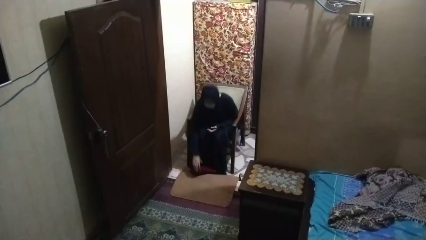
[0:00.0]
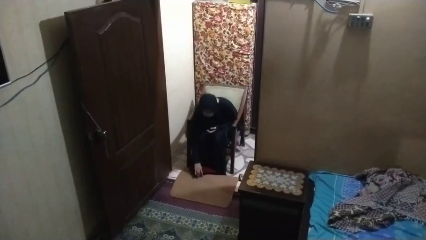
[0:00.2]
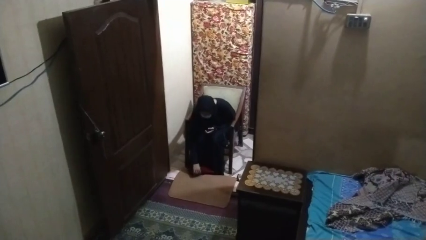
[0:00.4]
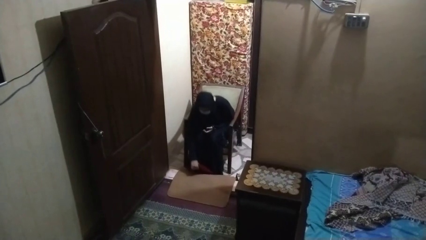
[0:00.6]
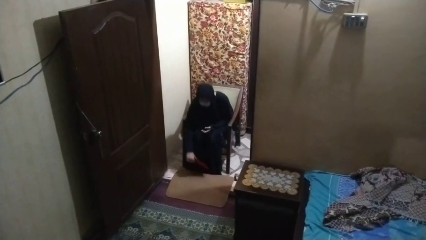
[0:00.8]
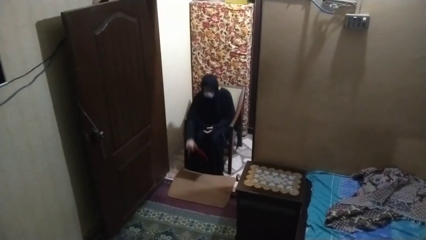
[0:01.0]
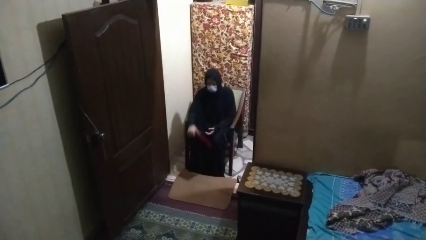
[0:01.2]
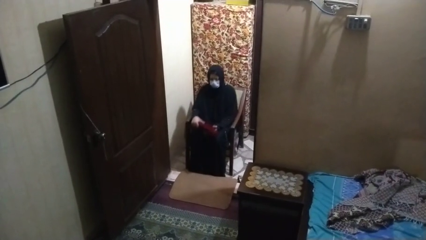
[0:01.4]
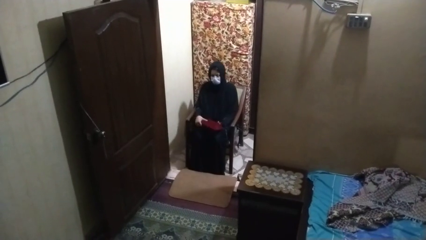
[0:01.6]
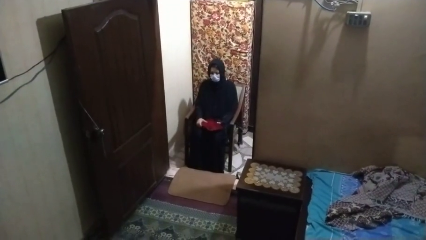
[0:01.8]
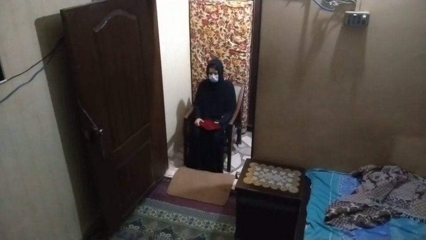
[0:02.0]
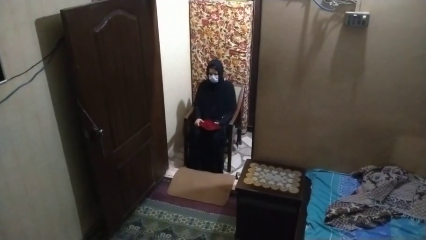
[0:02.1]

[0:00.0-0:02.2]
person picks up object from floor

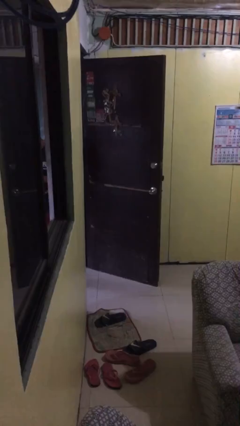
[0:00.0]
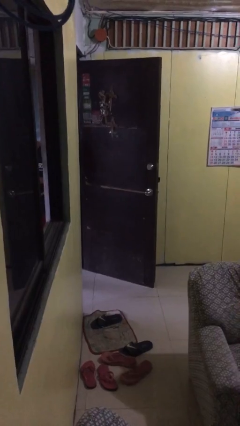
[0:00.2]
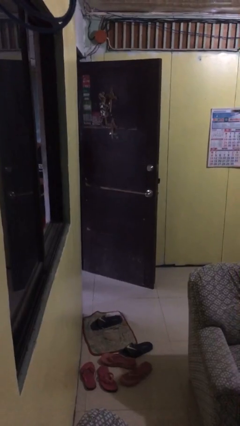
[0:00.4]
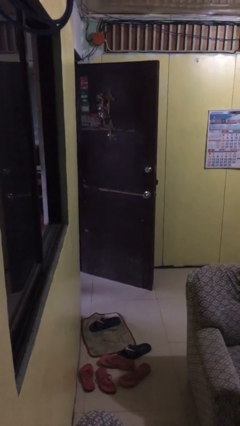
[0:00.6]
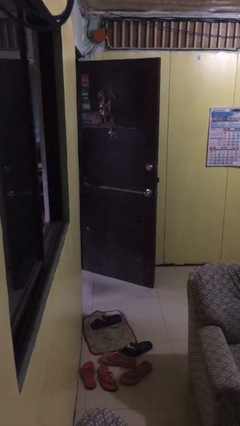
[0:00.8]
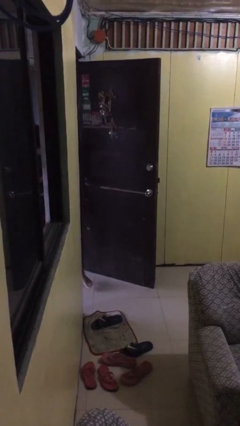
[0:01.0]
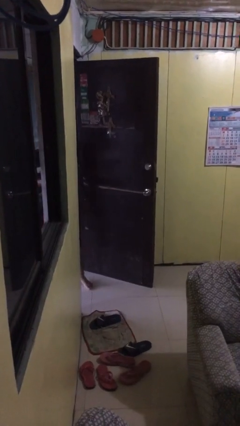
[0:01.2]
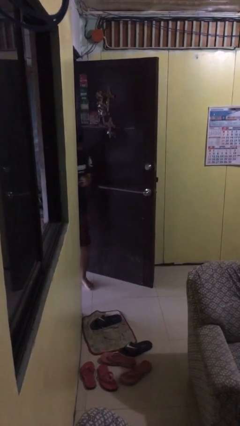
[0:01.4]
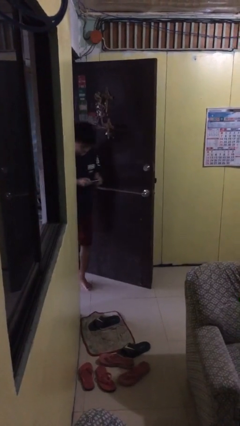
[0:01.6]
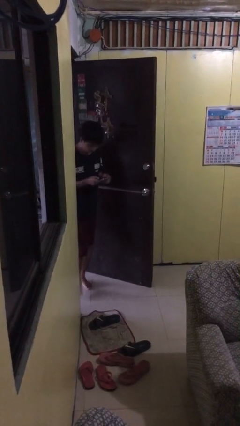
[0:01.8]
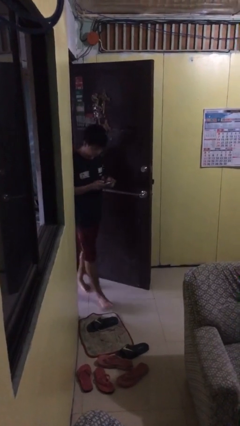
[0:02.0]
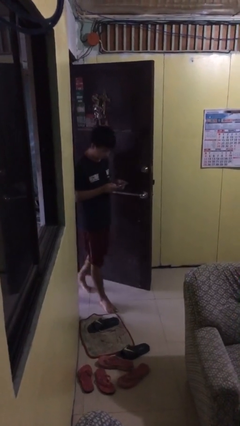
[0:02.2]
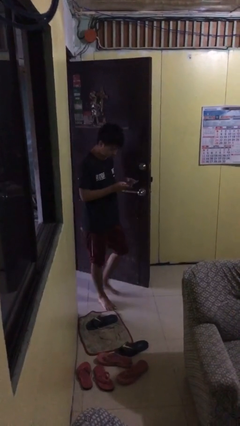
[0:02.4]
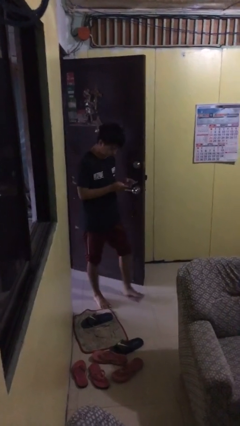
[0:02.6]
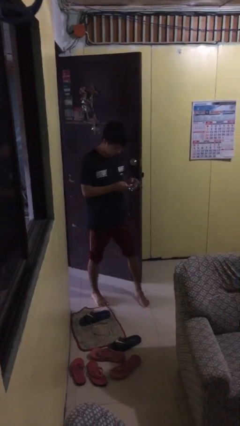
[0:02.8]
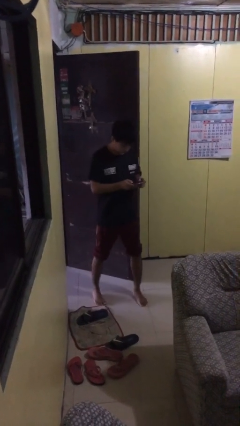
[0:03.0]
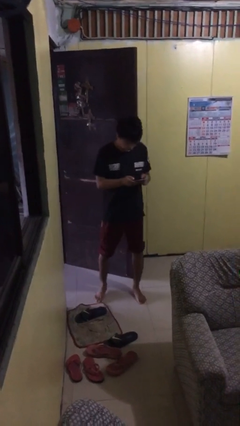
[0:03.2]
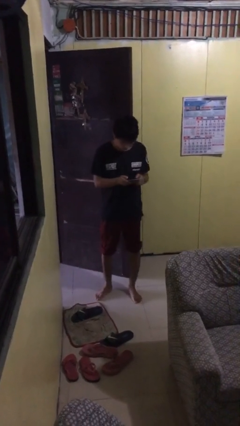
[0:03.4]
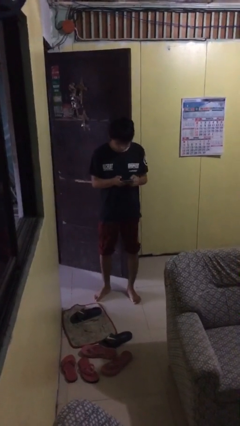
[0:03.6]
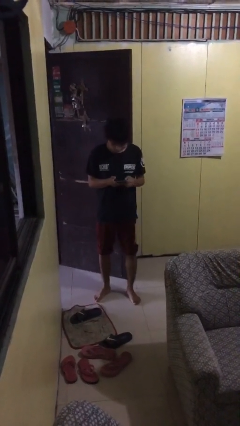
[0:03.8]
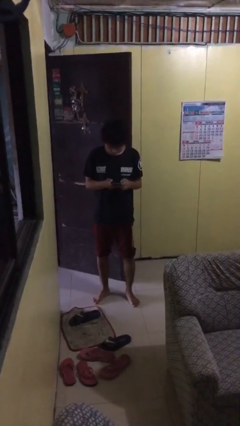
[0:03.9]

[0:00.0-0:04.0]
person enters scene through structure

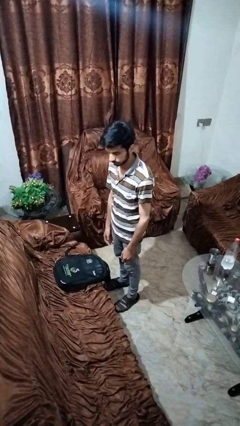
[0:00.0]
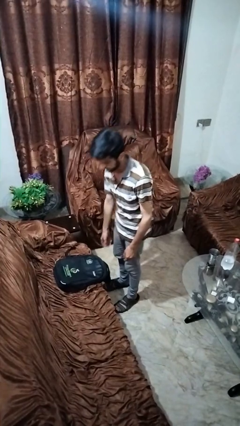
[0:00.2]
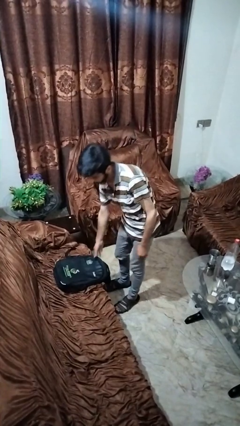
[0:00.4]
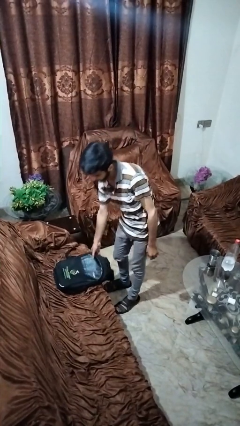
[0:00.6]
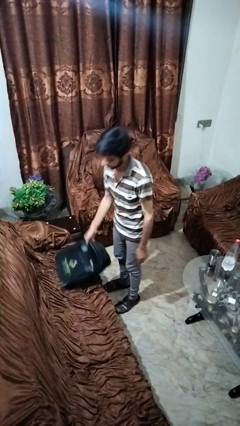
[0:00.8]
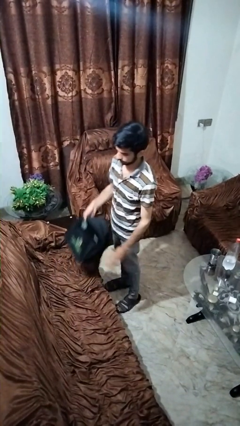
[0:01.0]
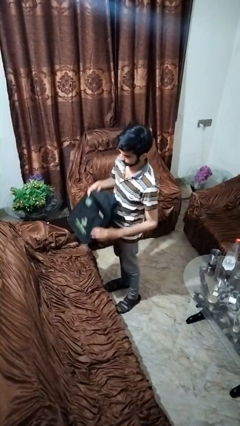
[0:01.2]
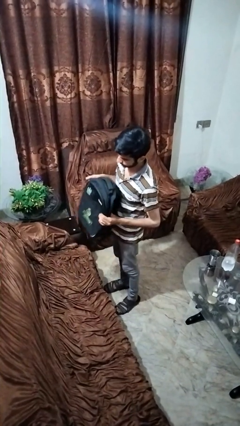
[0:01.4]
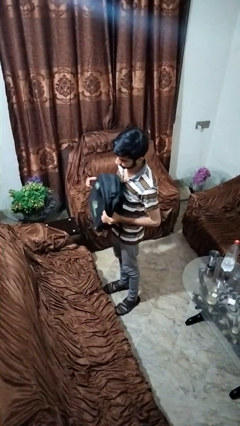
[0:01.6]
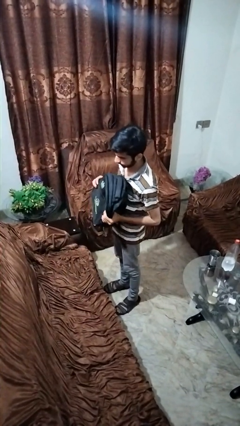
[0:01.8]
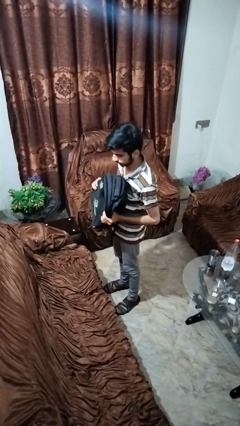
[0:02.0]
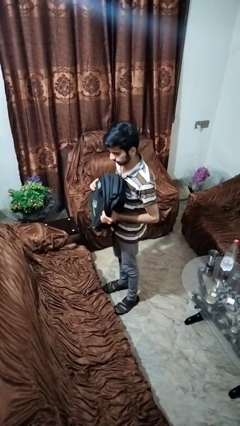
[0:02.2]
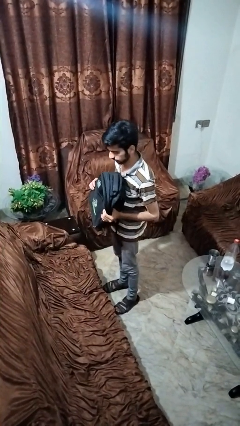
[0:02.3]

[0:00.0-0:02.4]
person picks up object from couch

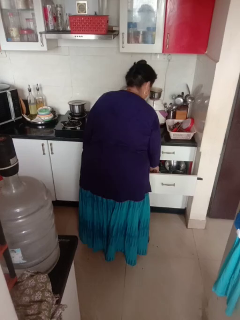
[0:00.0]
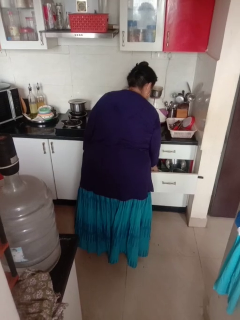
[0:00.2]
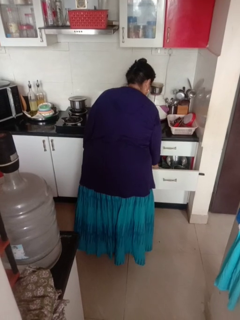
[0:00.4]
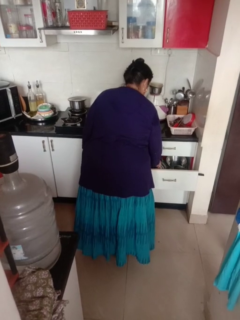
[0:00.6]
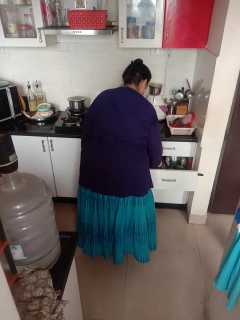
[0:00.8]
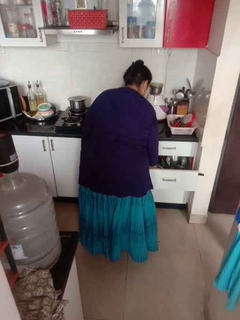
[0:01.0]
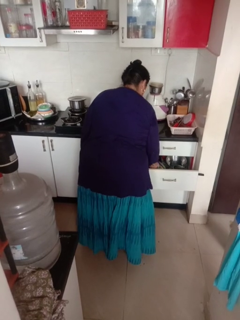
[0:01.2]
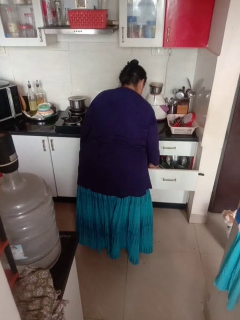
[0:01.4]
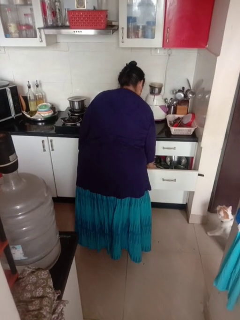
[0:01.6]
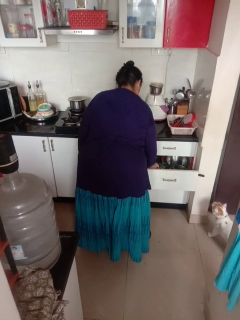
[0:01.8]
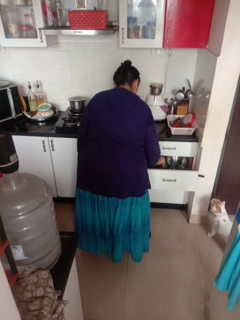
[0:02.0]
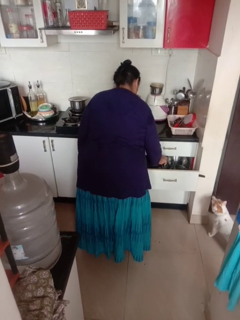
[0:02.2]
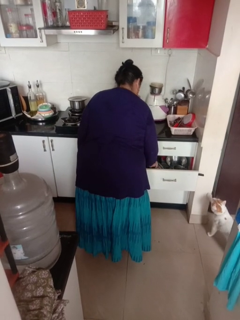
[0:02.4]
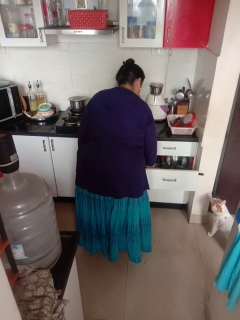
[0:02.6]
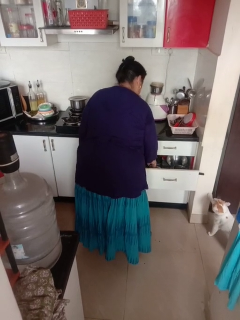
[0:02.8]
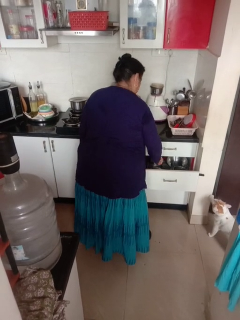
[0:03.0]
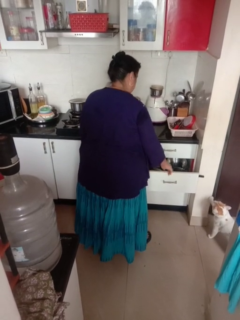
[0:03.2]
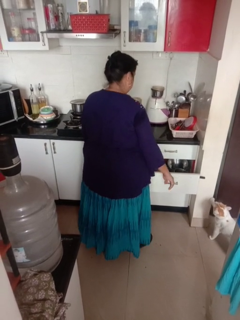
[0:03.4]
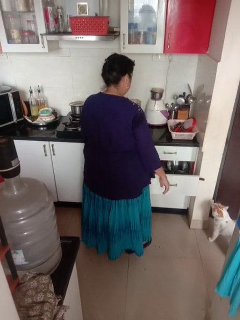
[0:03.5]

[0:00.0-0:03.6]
person searches in kitchen drawer

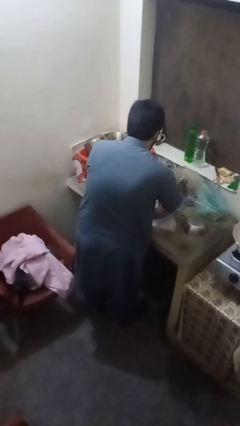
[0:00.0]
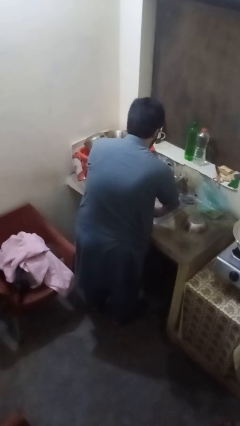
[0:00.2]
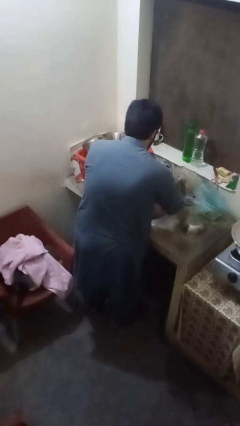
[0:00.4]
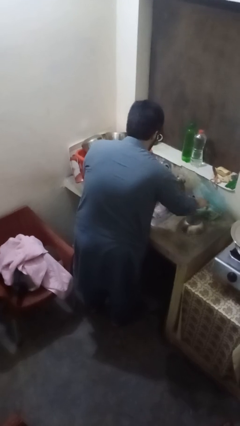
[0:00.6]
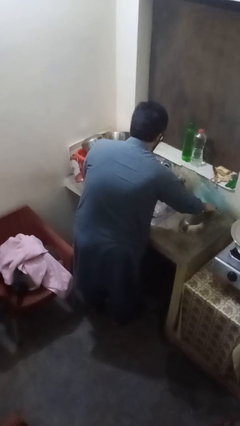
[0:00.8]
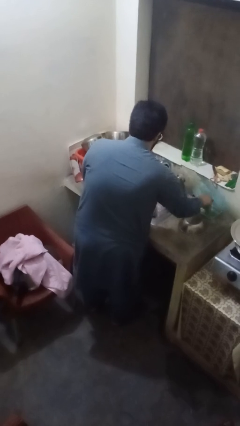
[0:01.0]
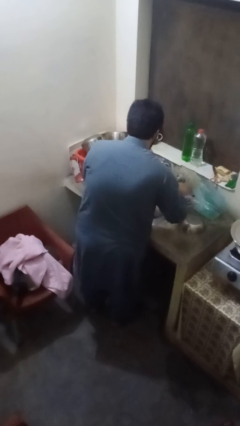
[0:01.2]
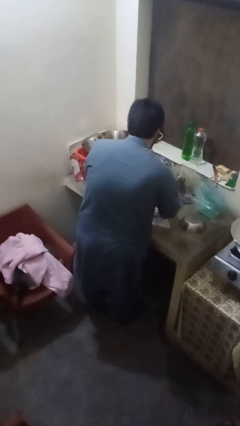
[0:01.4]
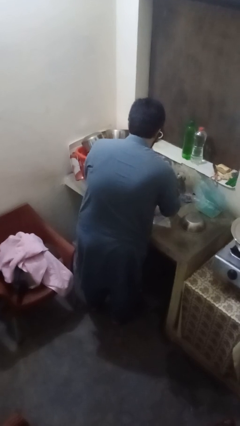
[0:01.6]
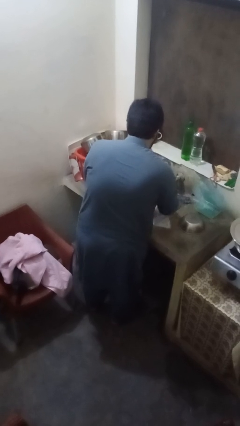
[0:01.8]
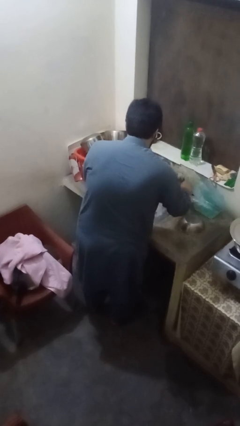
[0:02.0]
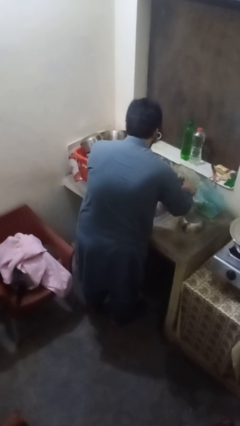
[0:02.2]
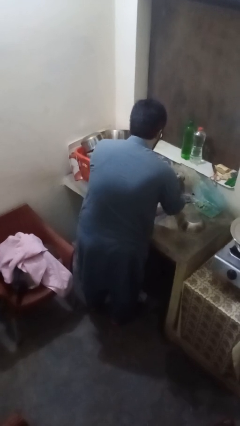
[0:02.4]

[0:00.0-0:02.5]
person washes dish

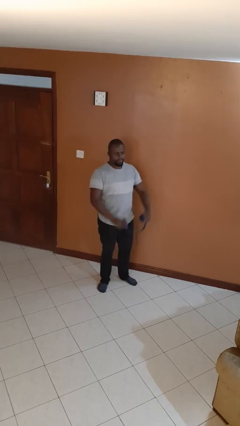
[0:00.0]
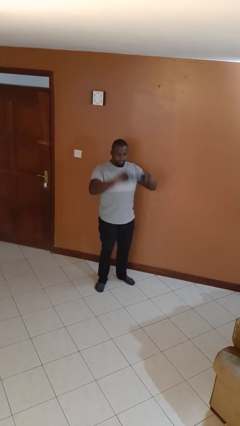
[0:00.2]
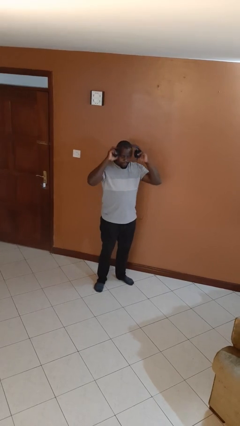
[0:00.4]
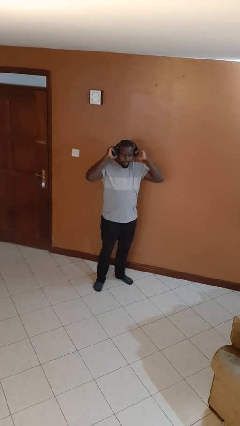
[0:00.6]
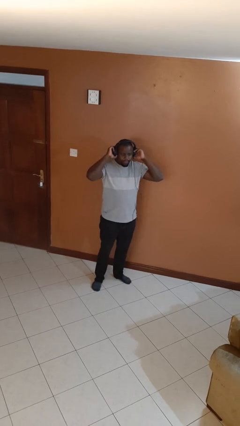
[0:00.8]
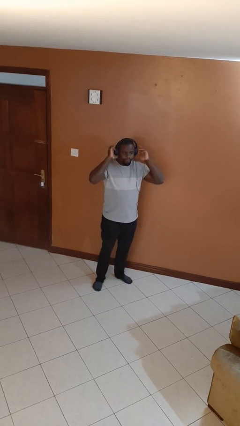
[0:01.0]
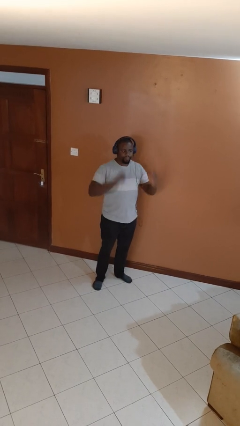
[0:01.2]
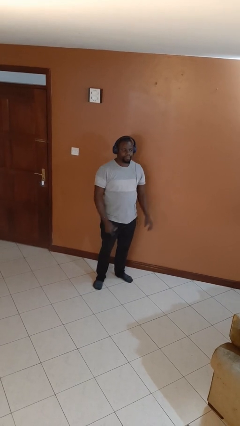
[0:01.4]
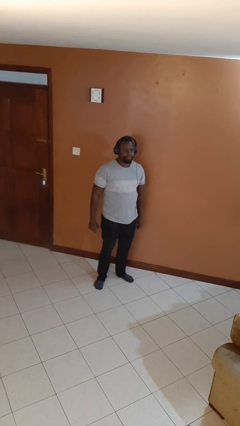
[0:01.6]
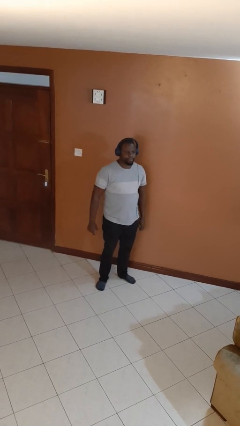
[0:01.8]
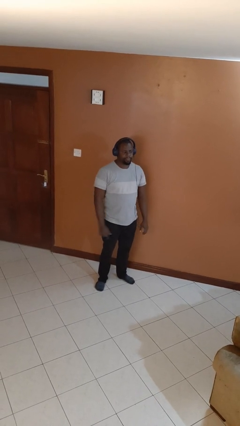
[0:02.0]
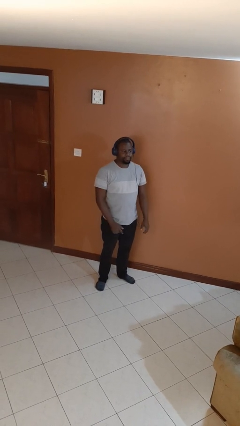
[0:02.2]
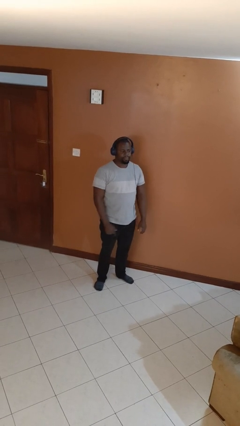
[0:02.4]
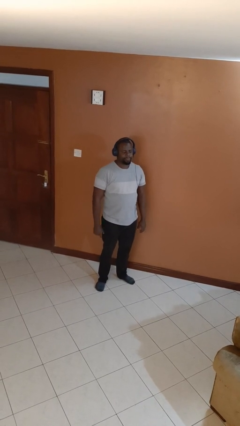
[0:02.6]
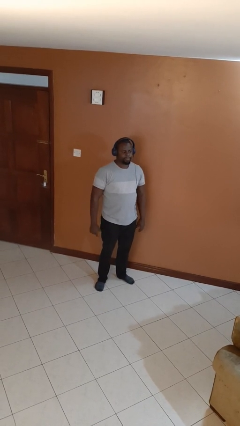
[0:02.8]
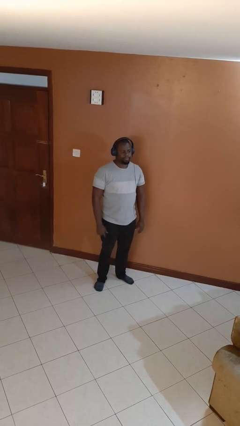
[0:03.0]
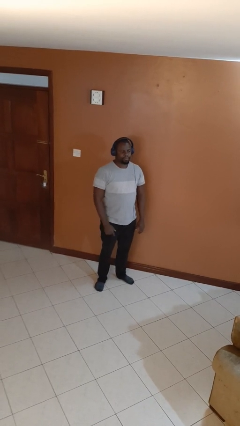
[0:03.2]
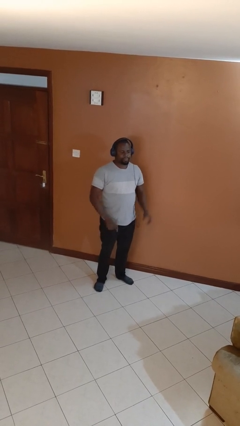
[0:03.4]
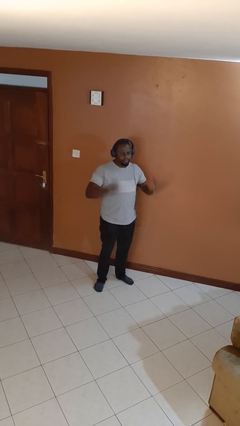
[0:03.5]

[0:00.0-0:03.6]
person puts on headphones
